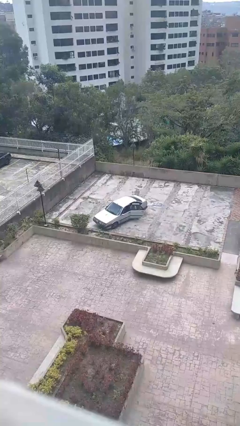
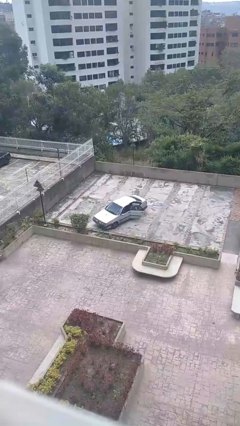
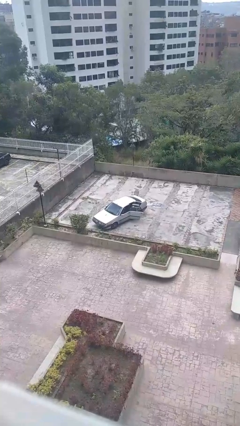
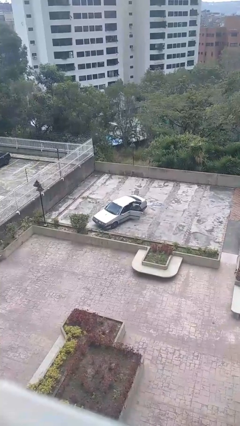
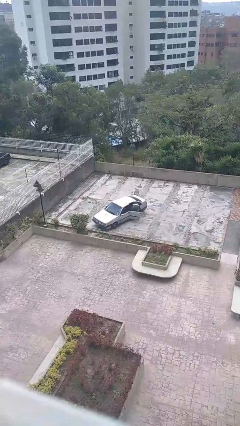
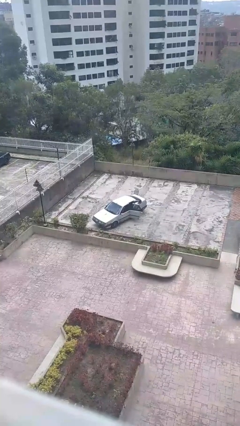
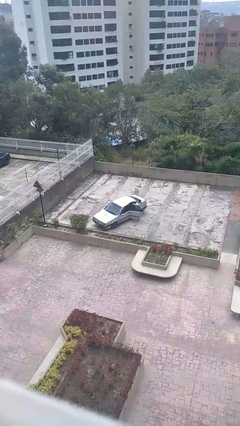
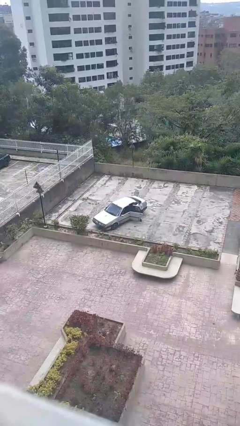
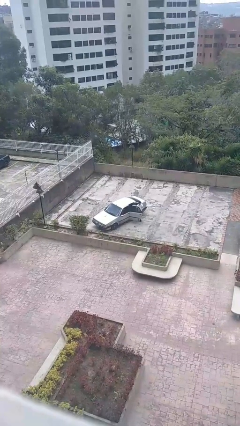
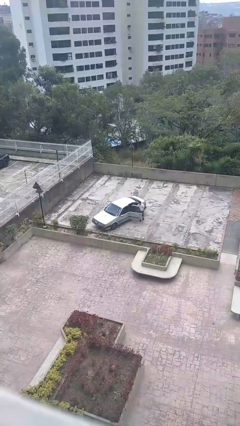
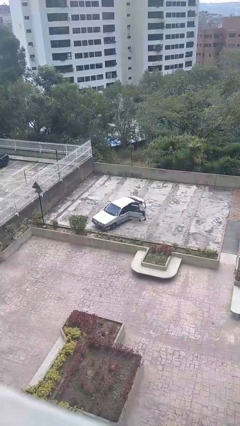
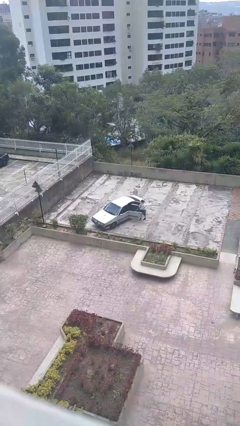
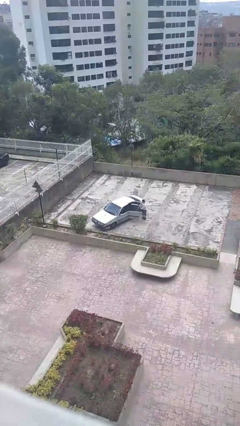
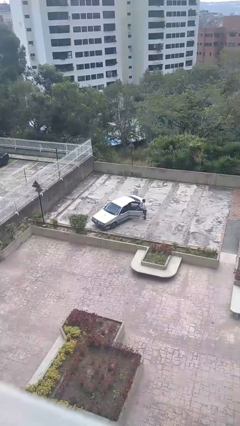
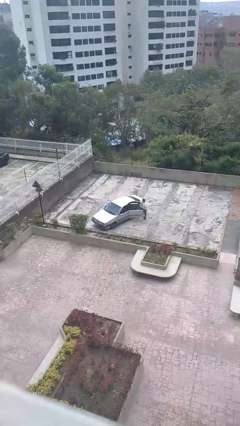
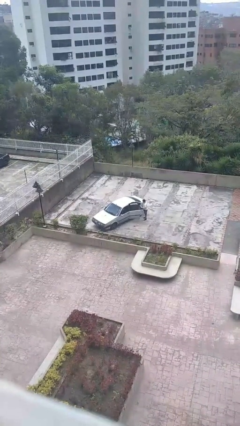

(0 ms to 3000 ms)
car drops off person

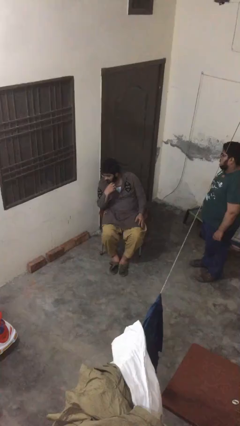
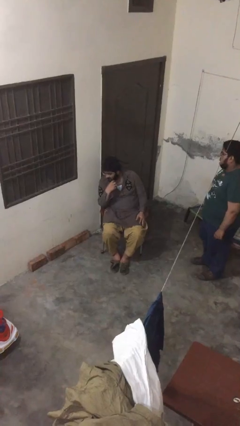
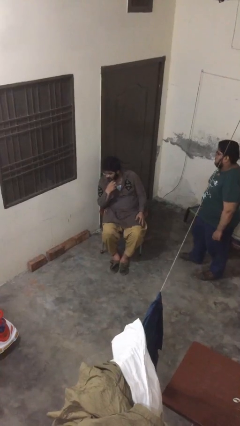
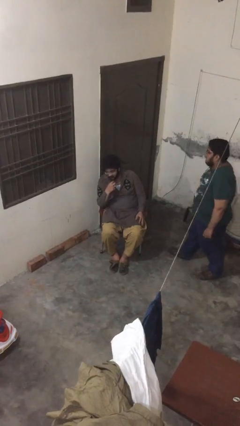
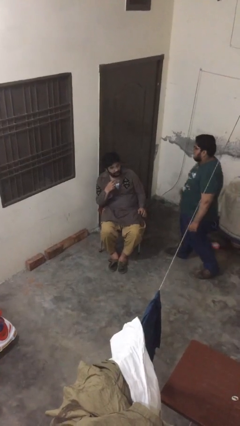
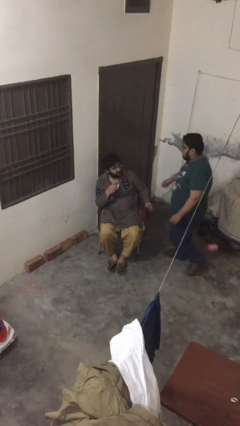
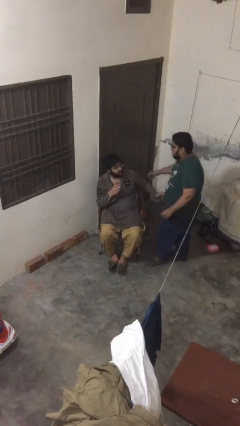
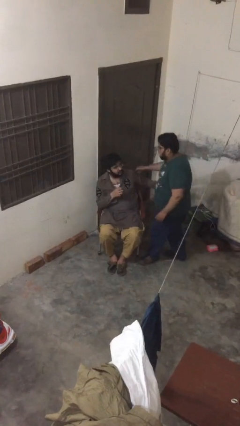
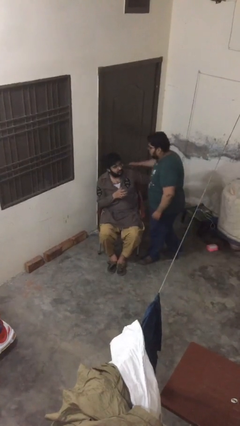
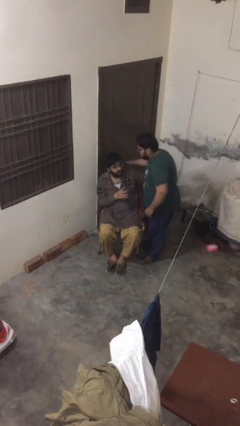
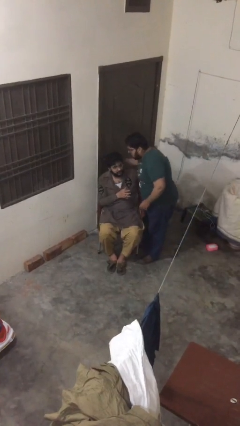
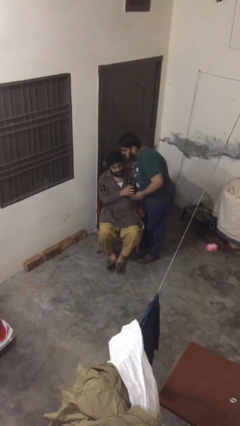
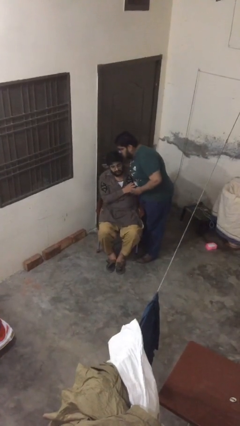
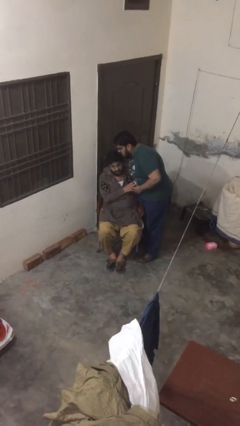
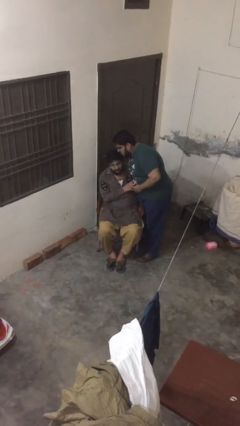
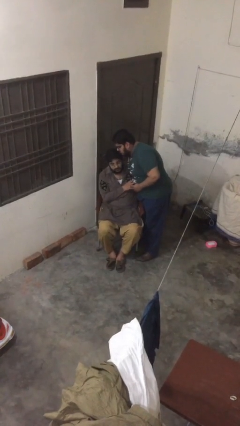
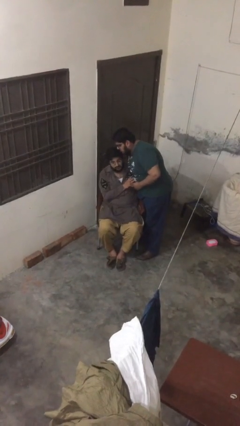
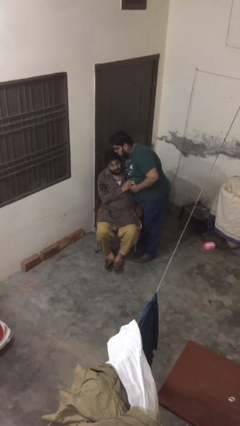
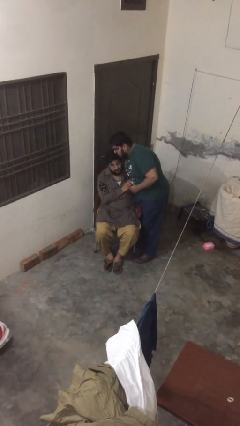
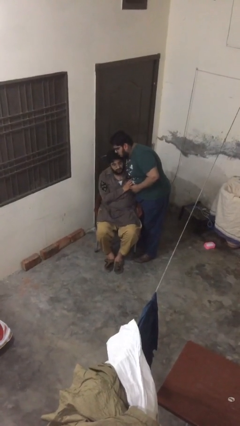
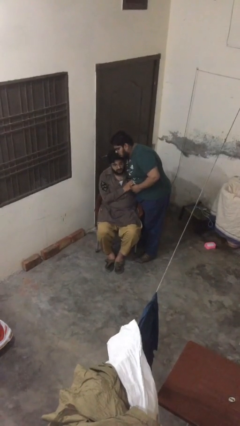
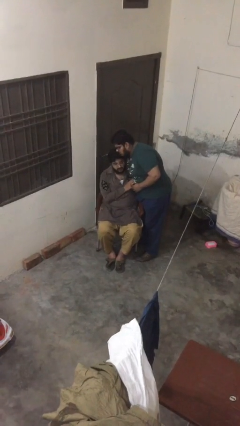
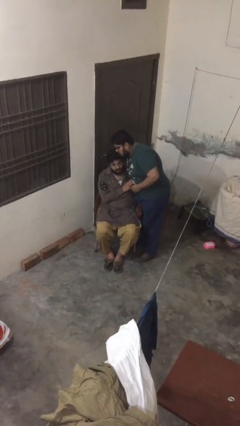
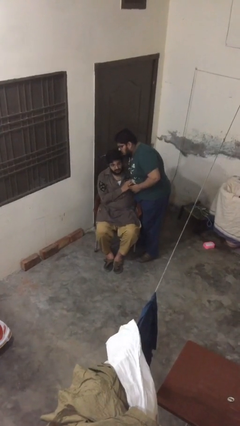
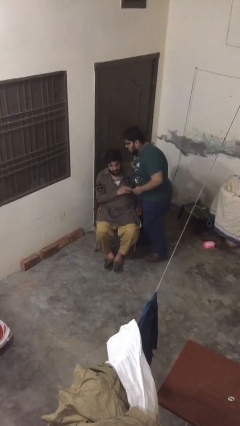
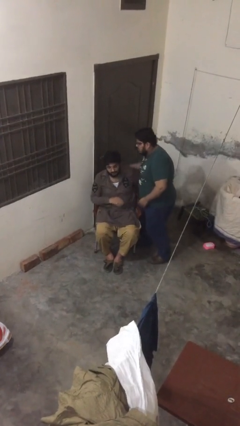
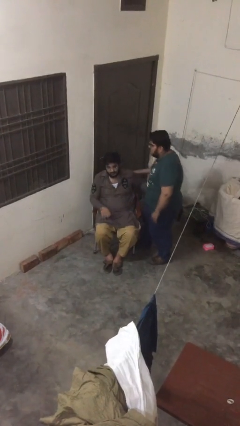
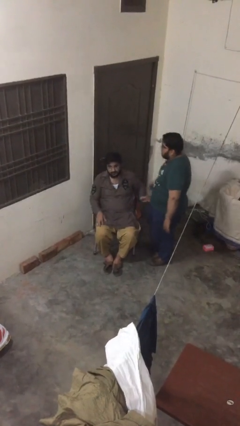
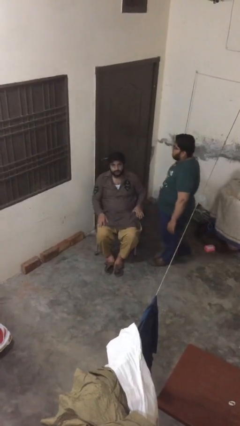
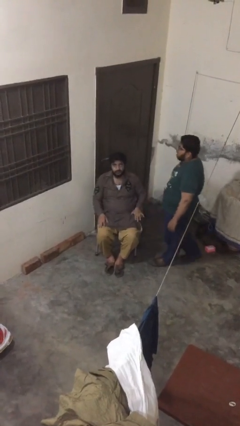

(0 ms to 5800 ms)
person embraces person

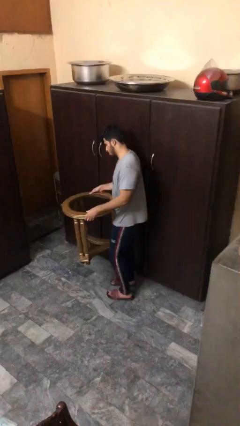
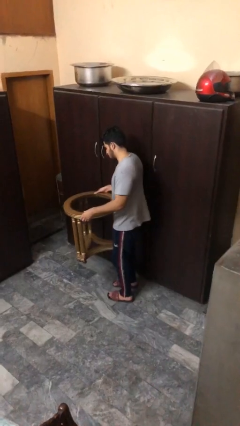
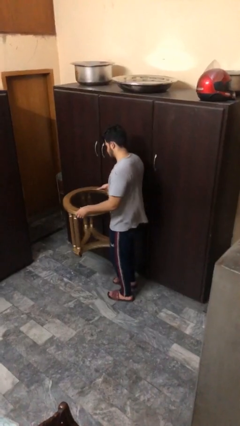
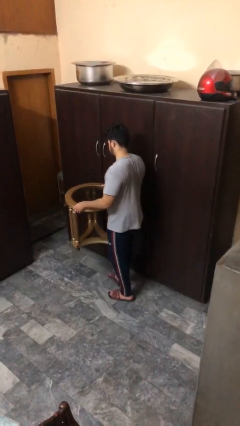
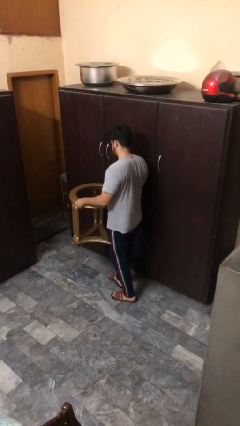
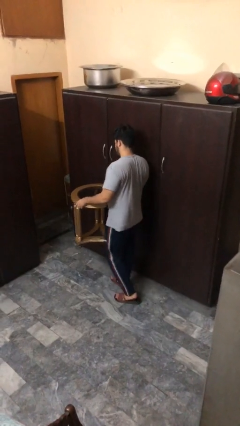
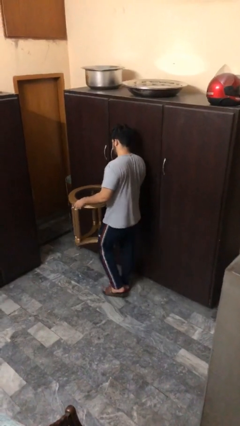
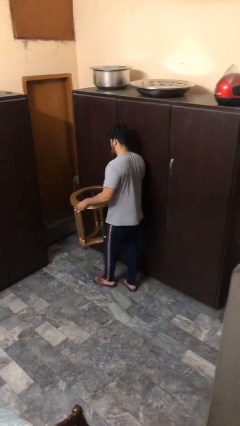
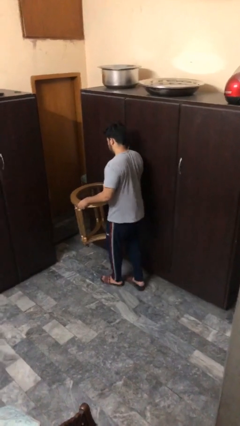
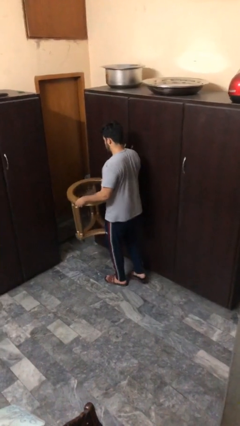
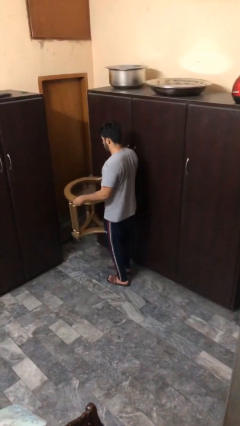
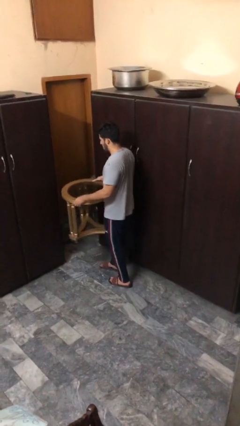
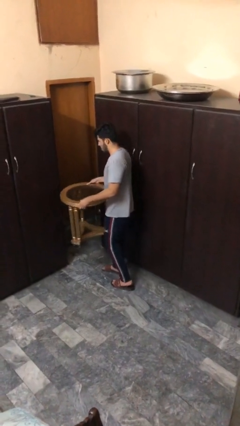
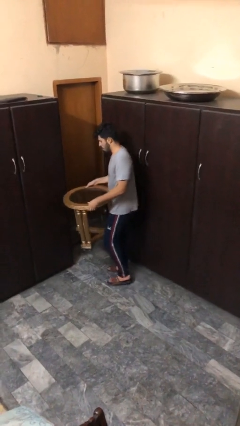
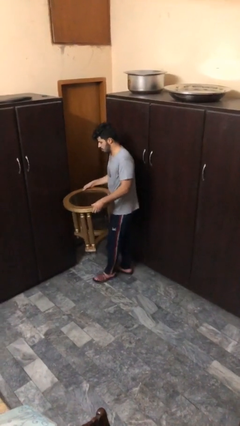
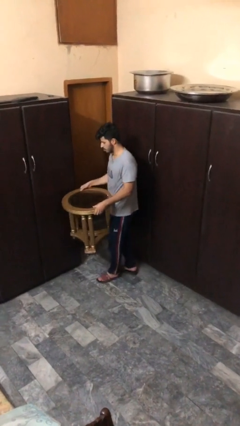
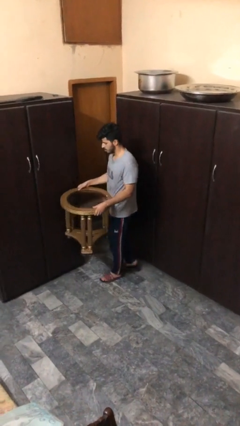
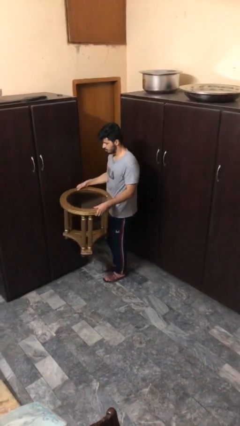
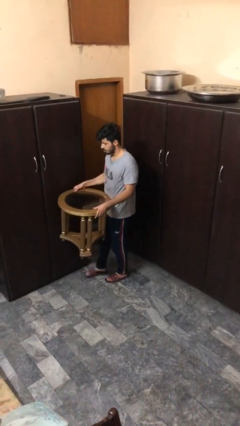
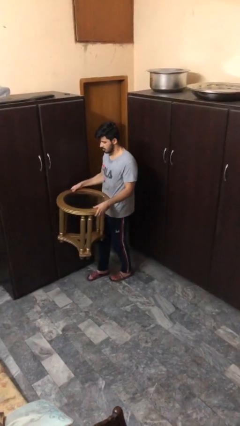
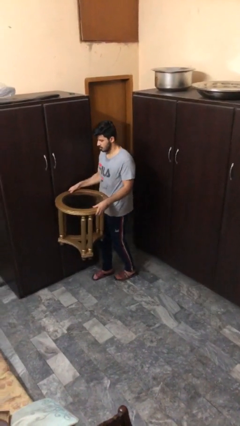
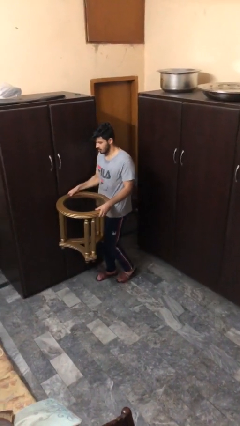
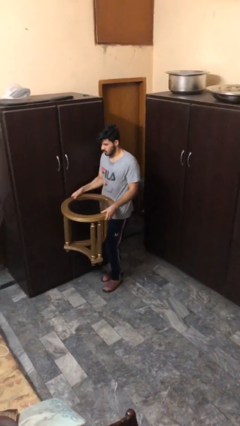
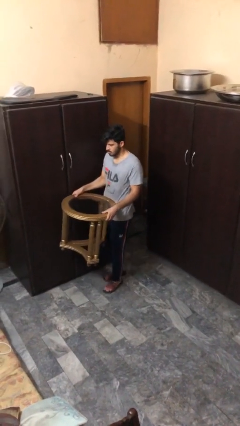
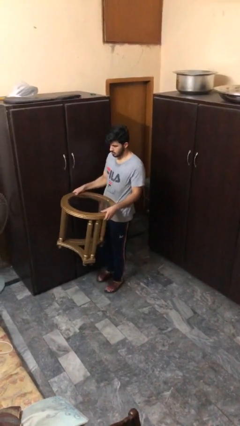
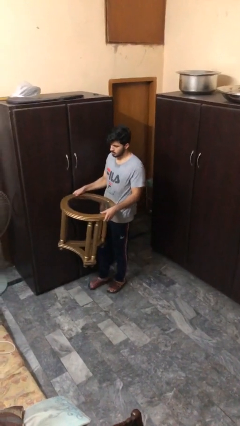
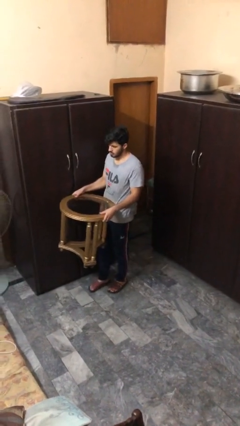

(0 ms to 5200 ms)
person carries furniture

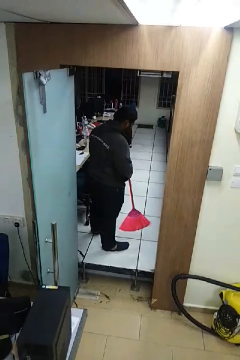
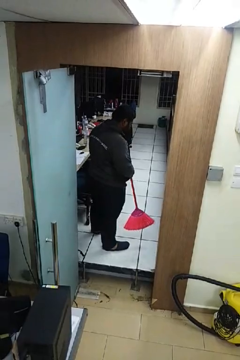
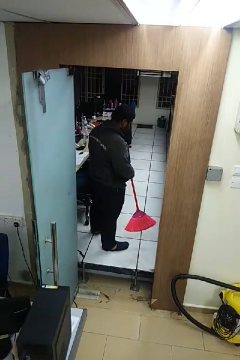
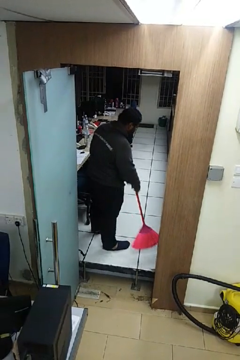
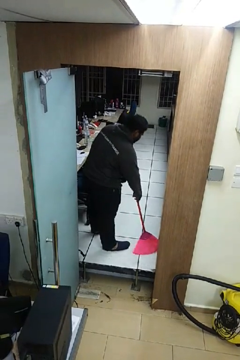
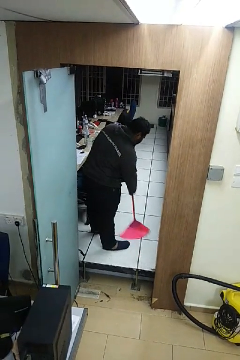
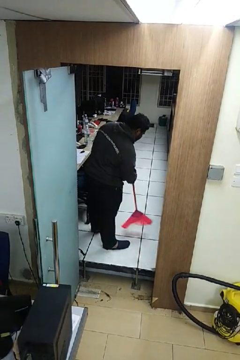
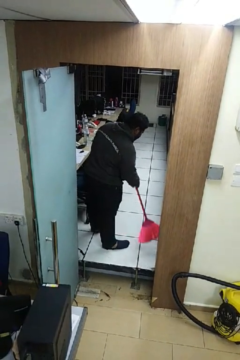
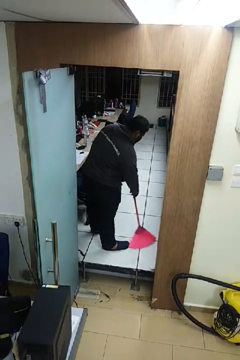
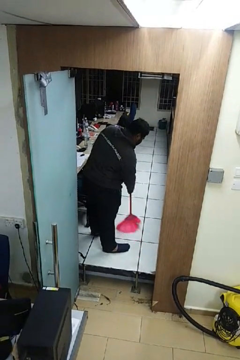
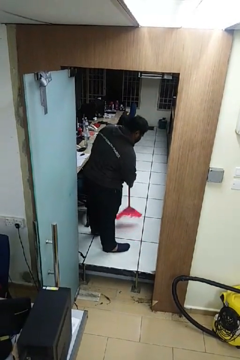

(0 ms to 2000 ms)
person sweeps floor

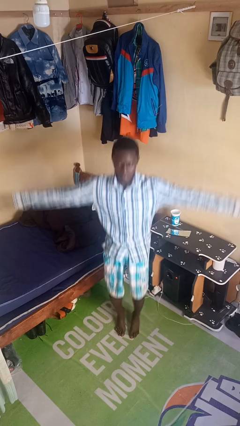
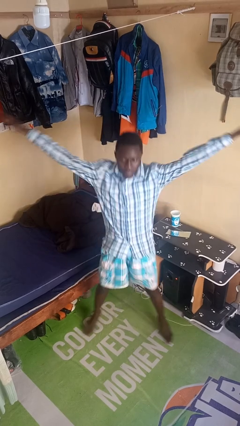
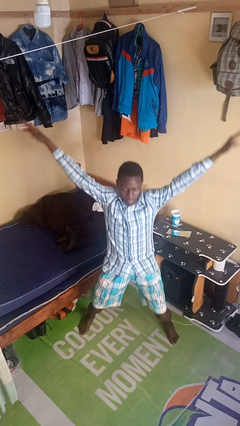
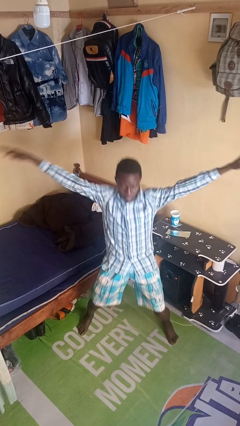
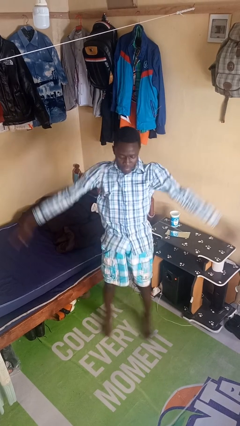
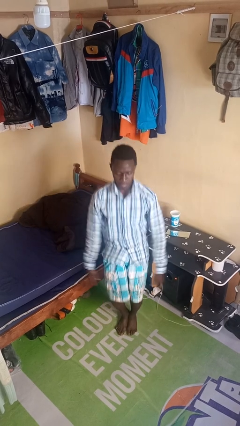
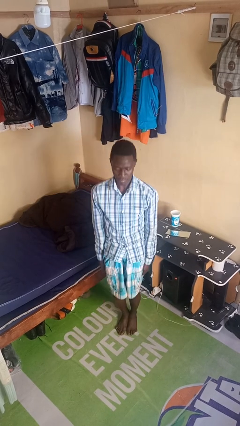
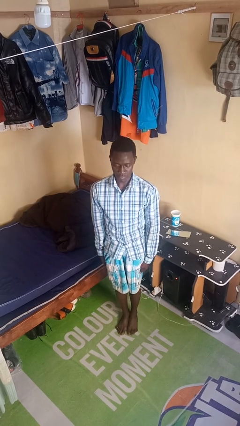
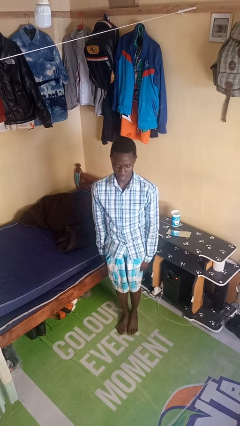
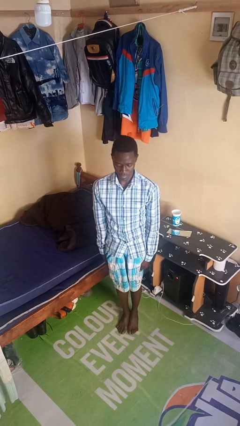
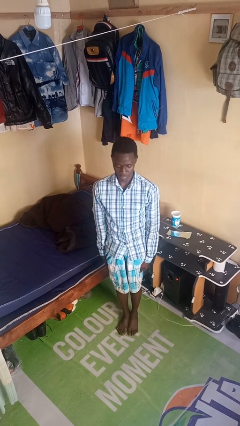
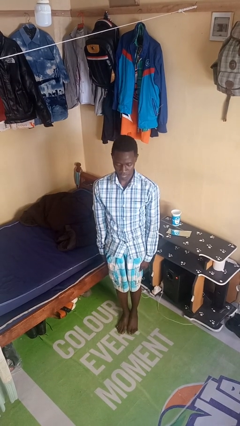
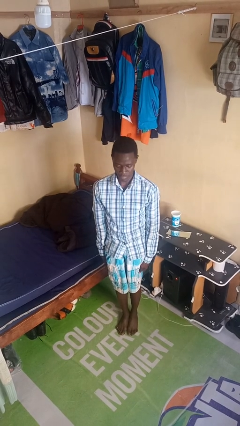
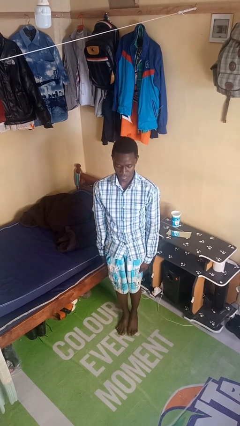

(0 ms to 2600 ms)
person exercises with jumping jacks
